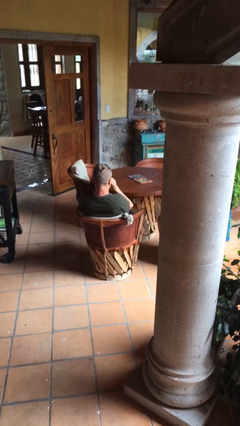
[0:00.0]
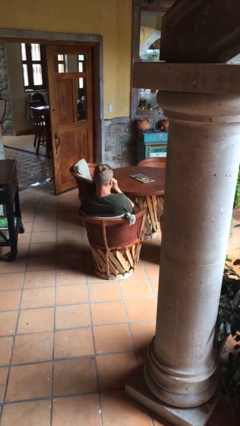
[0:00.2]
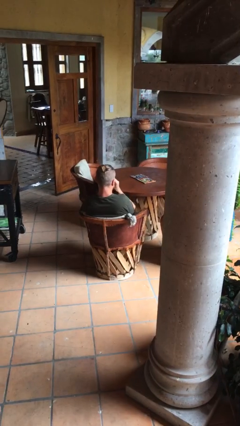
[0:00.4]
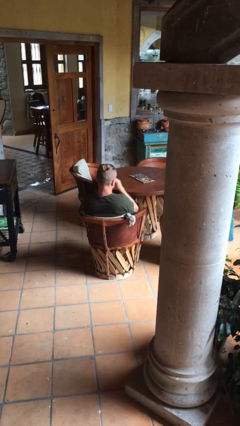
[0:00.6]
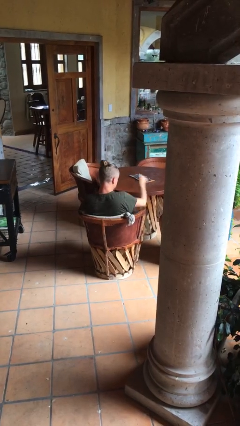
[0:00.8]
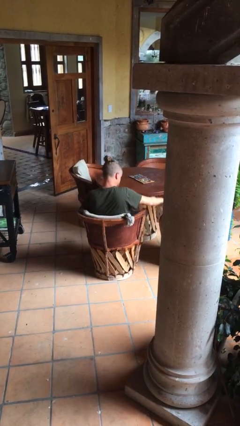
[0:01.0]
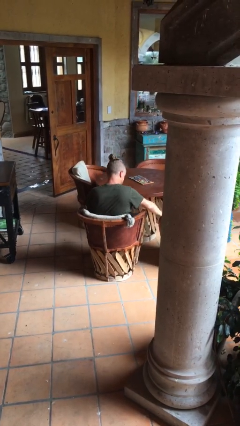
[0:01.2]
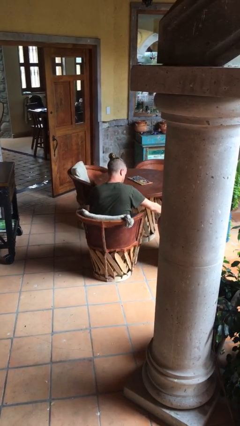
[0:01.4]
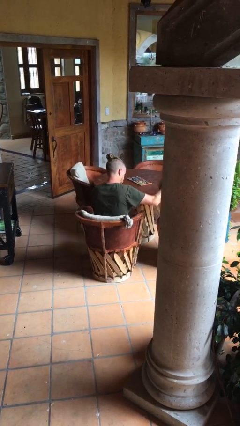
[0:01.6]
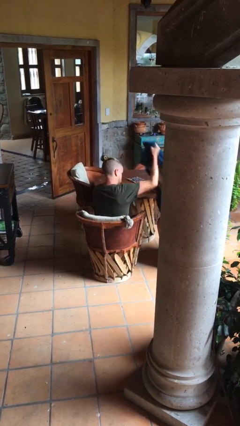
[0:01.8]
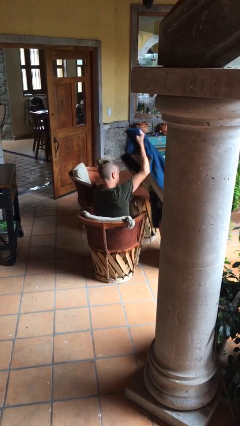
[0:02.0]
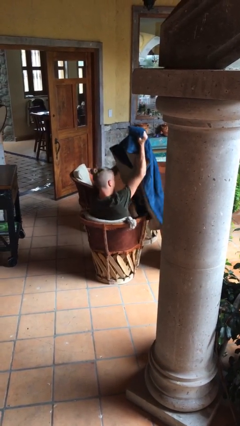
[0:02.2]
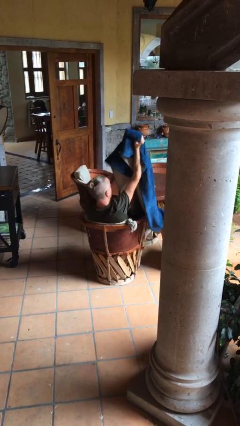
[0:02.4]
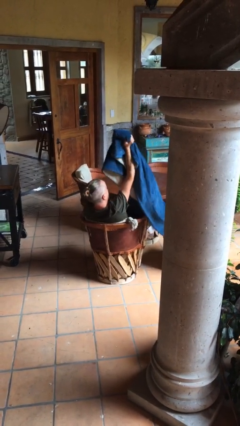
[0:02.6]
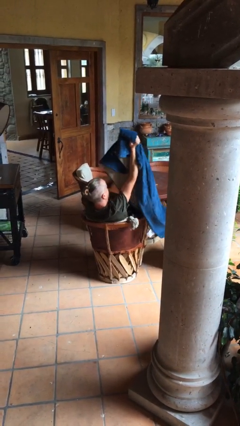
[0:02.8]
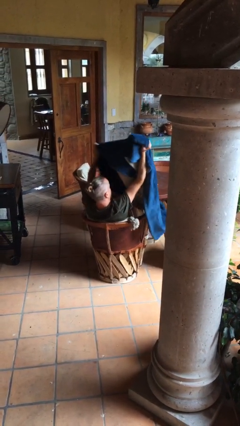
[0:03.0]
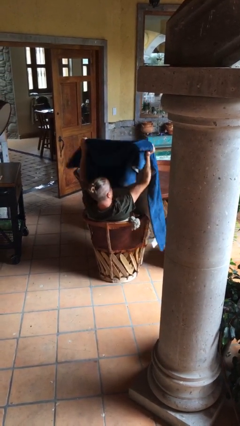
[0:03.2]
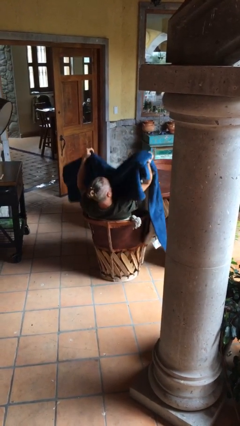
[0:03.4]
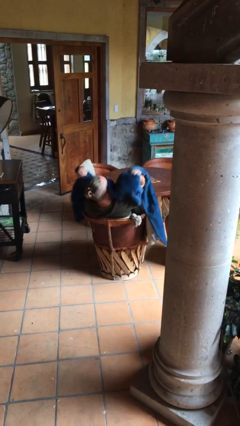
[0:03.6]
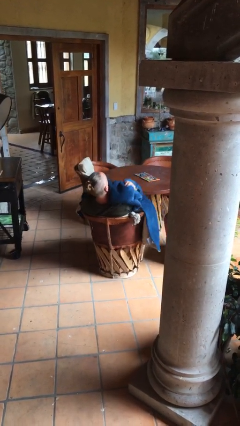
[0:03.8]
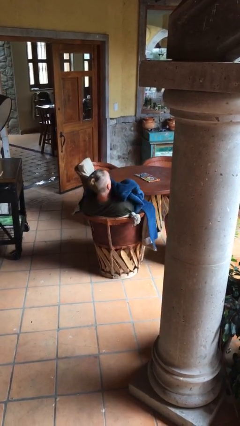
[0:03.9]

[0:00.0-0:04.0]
person covers with blanket

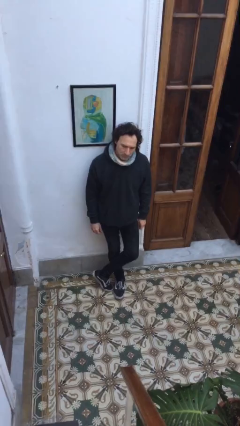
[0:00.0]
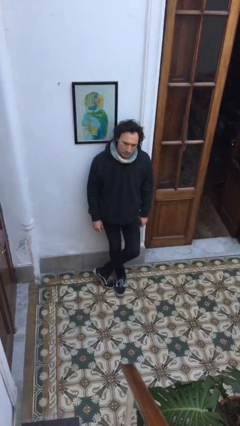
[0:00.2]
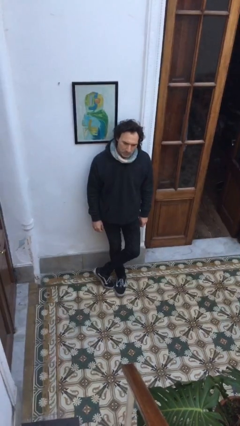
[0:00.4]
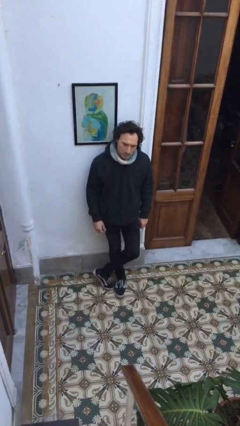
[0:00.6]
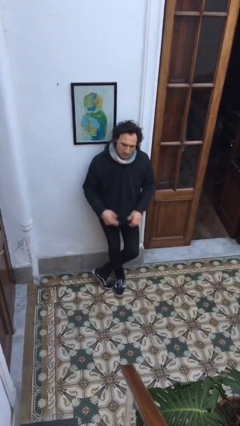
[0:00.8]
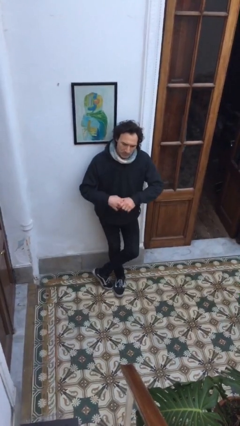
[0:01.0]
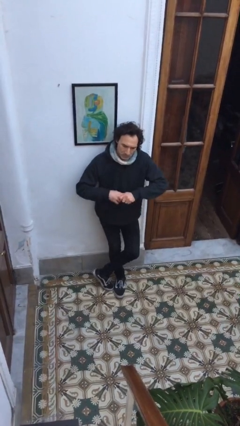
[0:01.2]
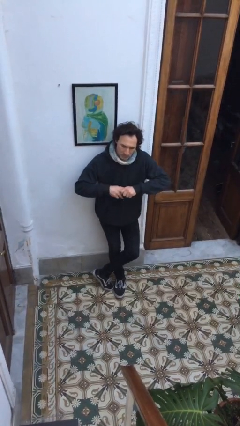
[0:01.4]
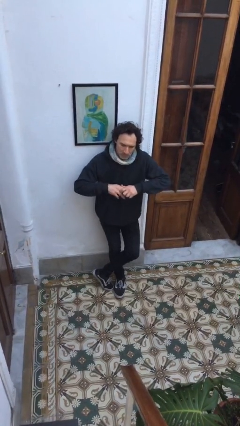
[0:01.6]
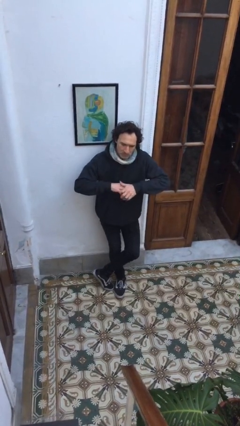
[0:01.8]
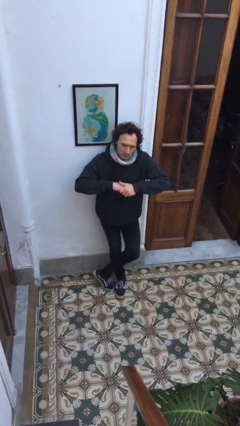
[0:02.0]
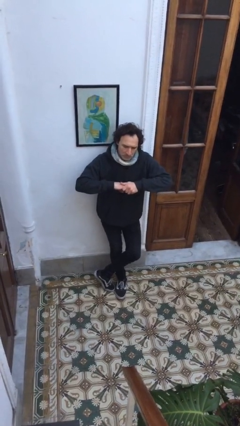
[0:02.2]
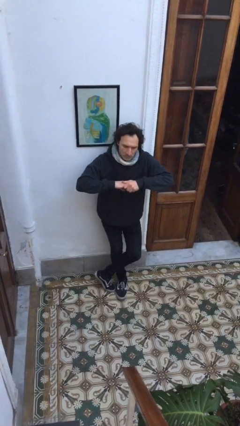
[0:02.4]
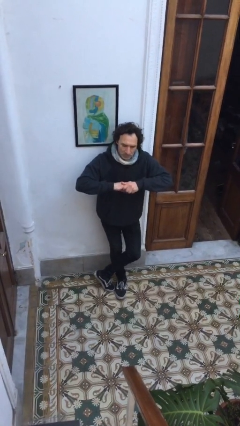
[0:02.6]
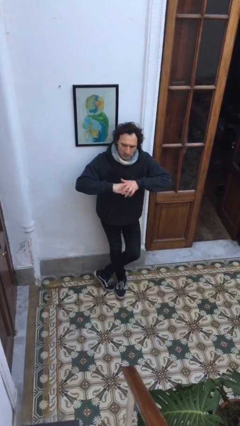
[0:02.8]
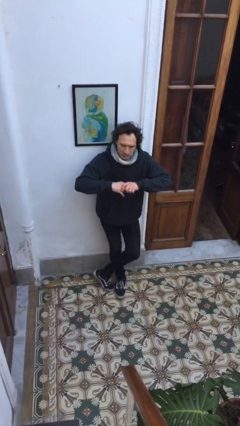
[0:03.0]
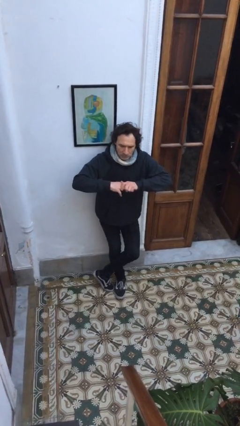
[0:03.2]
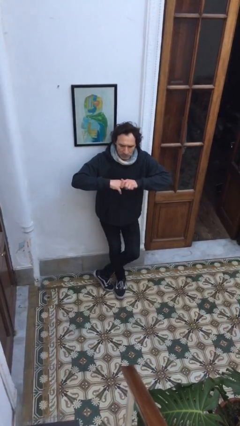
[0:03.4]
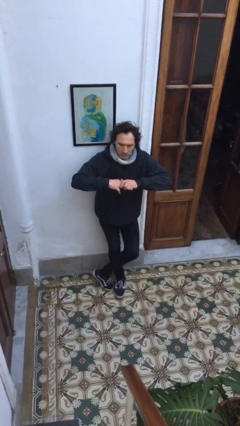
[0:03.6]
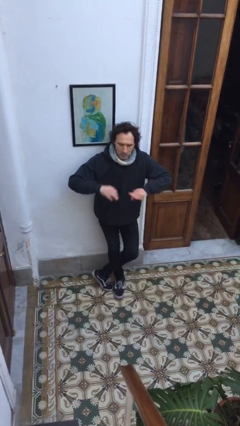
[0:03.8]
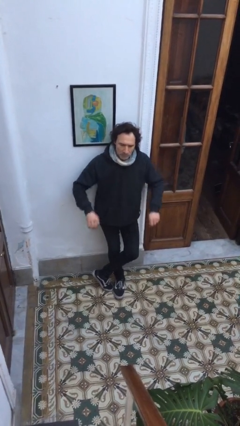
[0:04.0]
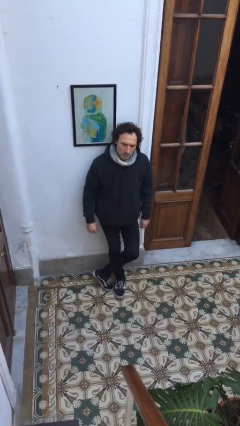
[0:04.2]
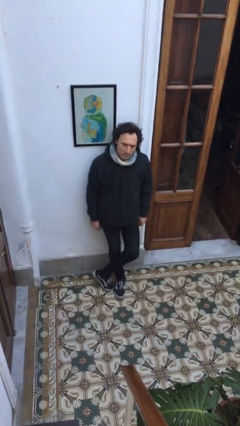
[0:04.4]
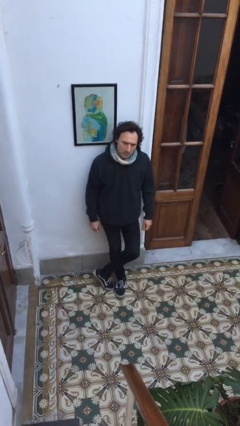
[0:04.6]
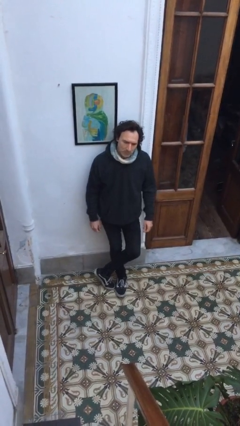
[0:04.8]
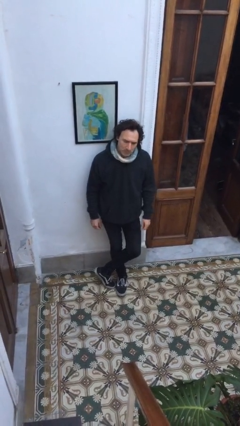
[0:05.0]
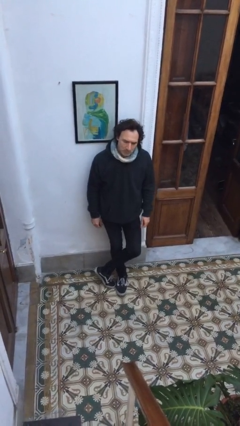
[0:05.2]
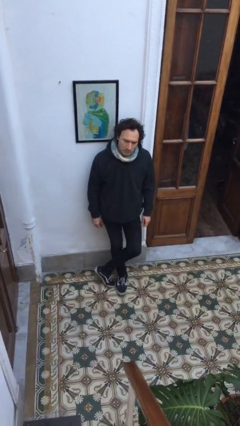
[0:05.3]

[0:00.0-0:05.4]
person cracks knuckles

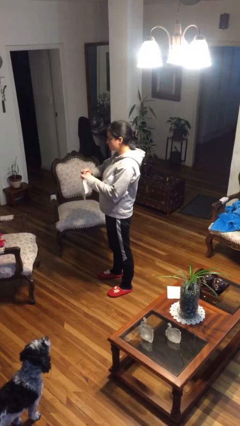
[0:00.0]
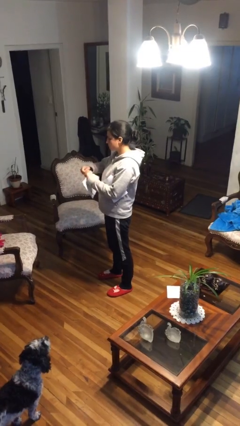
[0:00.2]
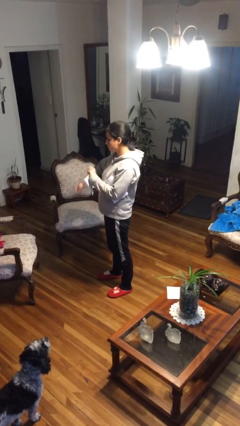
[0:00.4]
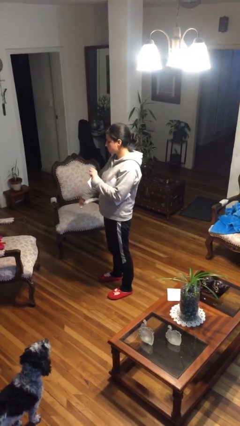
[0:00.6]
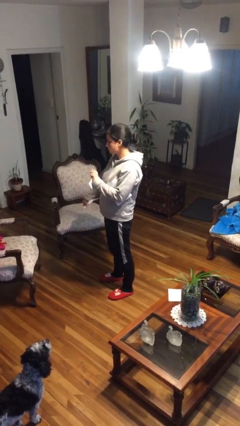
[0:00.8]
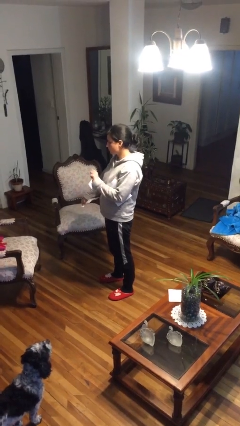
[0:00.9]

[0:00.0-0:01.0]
person tears paper

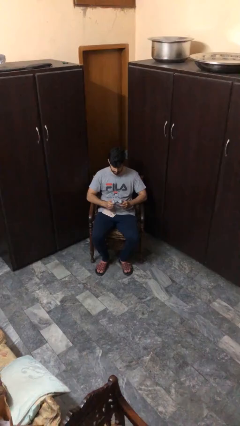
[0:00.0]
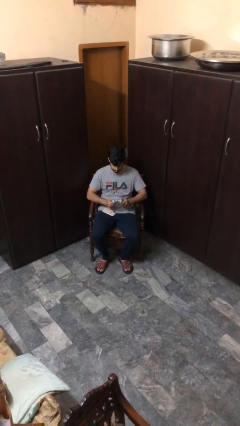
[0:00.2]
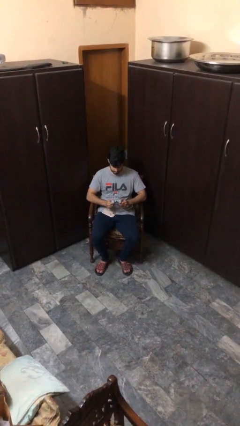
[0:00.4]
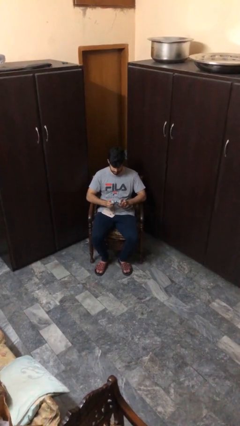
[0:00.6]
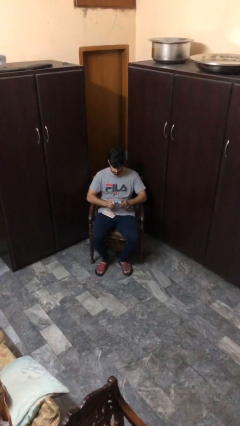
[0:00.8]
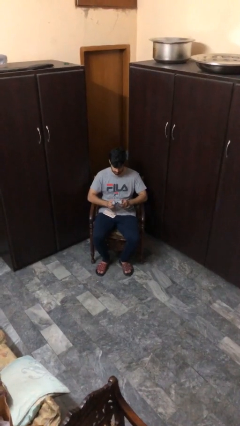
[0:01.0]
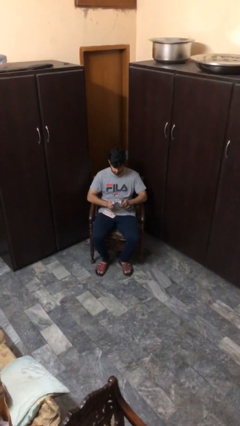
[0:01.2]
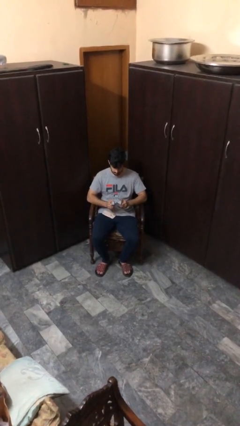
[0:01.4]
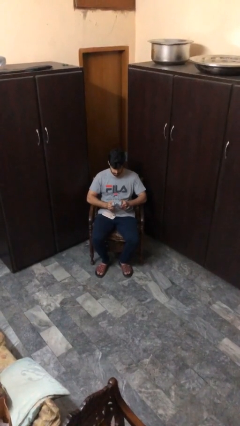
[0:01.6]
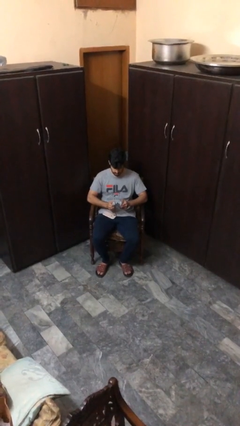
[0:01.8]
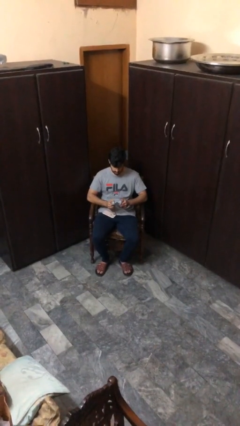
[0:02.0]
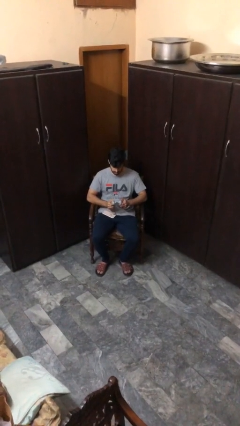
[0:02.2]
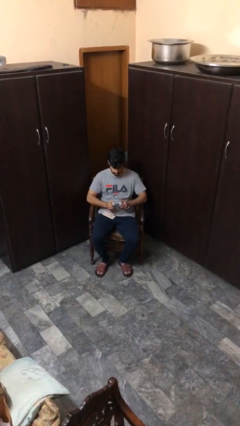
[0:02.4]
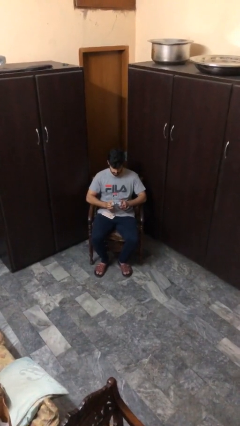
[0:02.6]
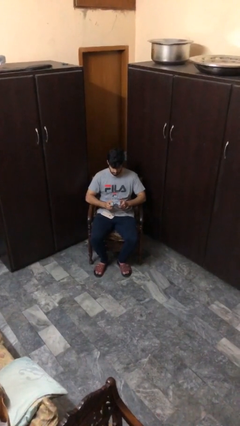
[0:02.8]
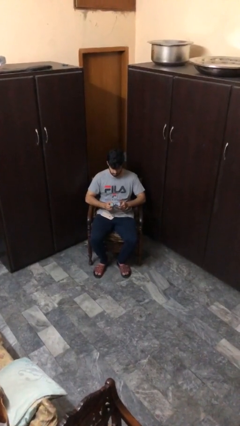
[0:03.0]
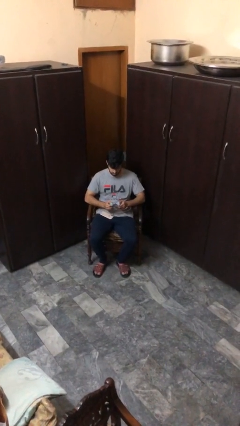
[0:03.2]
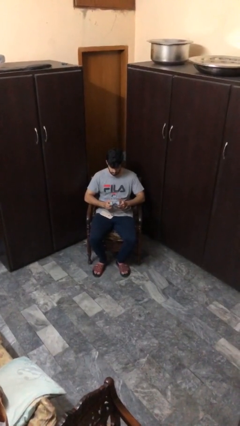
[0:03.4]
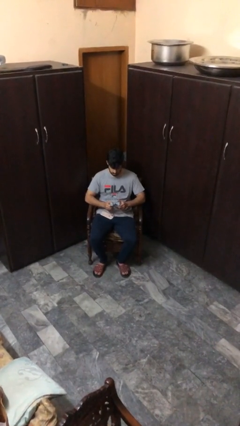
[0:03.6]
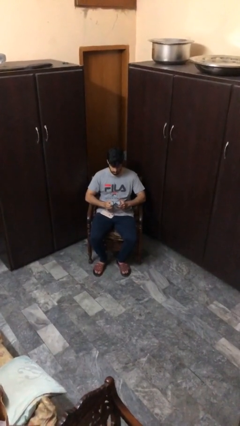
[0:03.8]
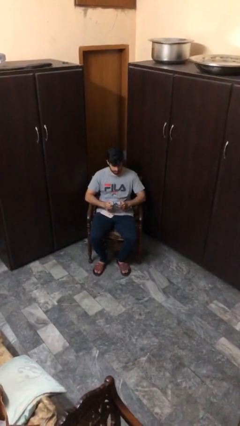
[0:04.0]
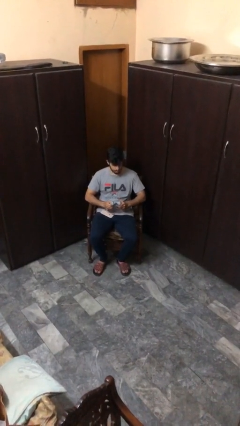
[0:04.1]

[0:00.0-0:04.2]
person interacts with handheld game

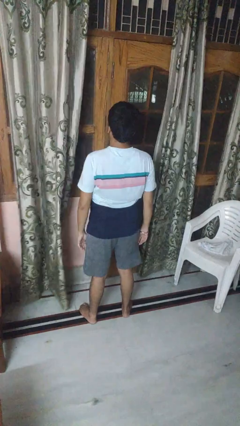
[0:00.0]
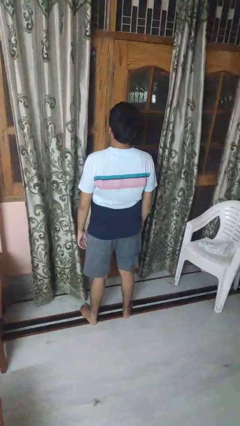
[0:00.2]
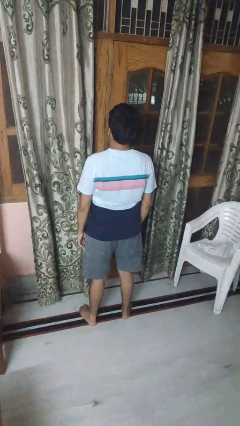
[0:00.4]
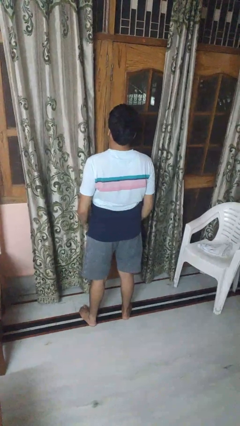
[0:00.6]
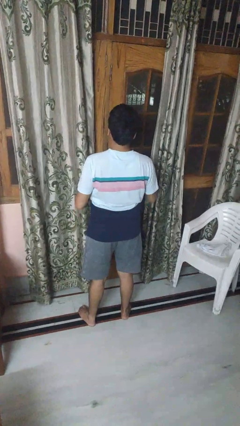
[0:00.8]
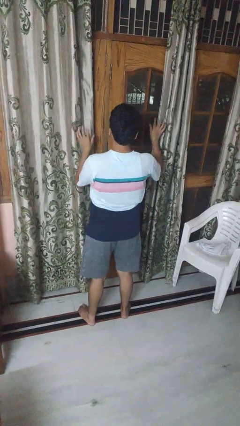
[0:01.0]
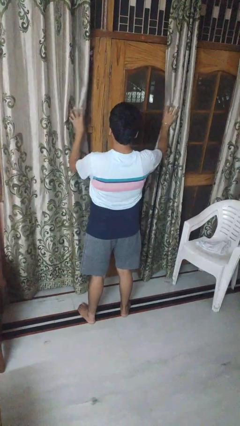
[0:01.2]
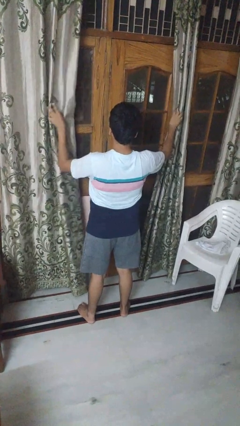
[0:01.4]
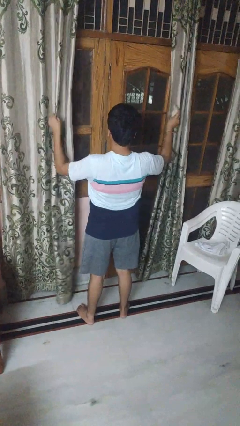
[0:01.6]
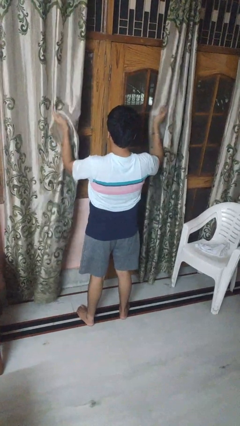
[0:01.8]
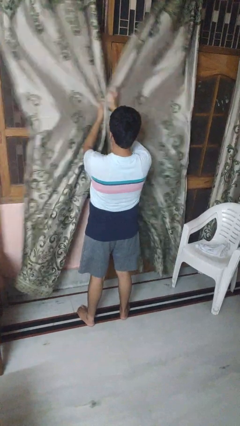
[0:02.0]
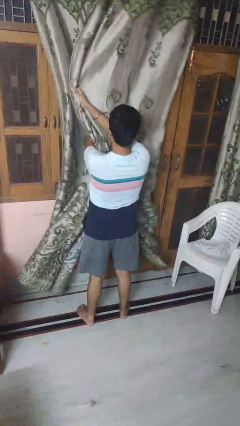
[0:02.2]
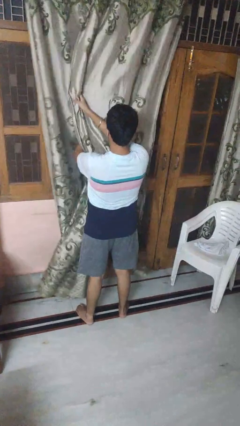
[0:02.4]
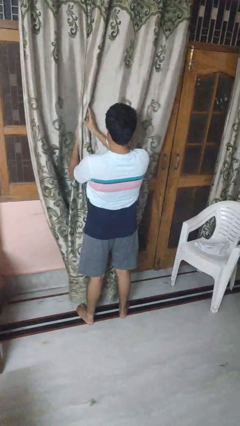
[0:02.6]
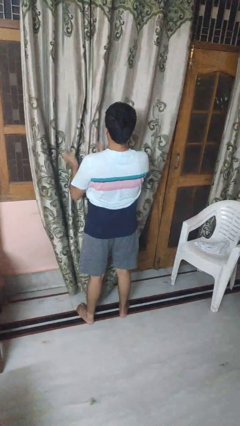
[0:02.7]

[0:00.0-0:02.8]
person closes curtains

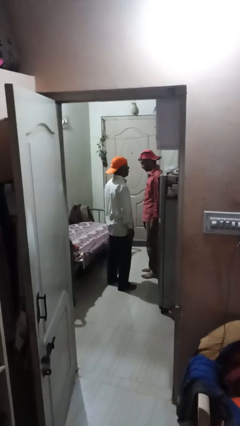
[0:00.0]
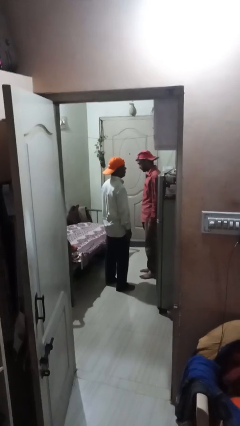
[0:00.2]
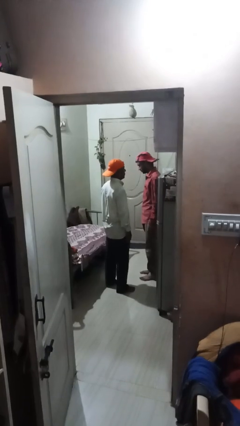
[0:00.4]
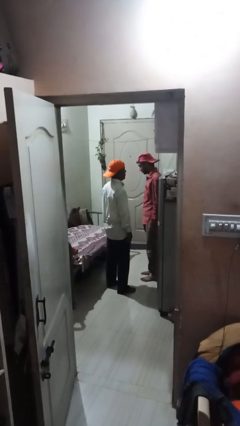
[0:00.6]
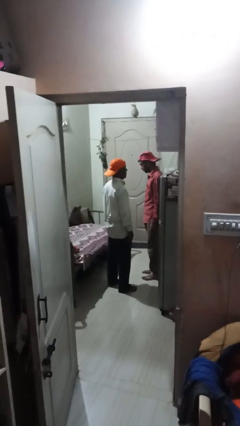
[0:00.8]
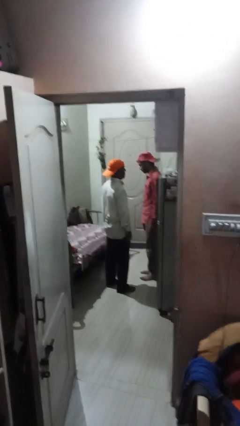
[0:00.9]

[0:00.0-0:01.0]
person kisses cheek of person
